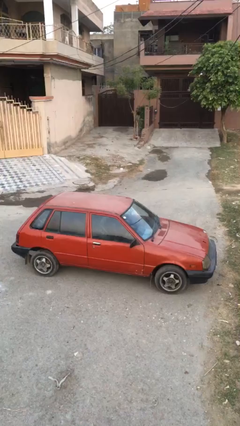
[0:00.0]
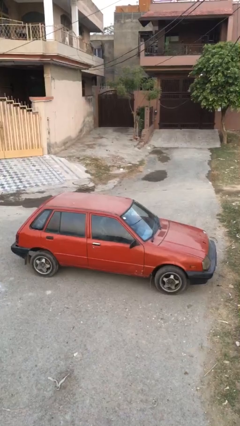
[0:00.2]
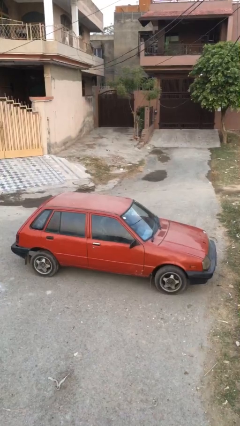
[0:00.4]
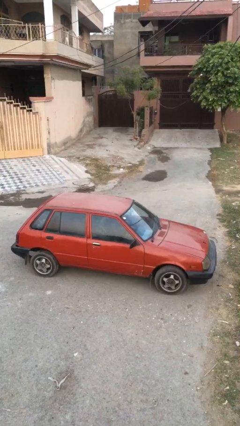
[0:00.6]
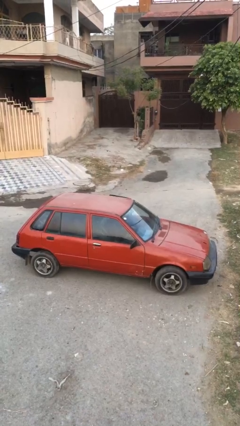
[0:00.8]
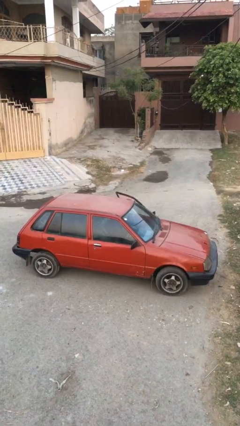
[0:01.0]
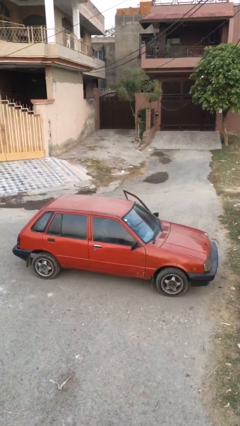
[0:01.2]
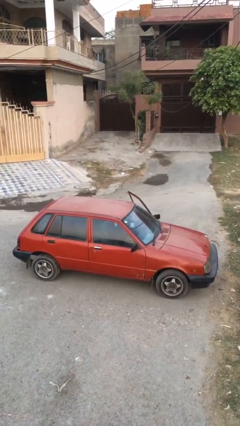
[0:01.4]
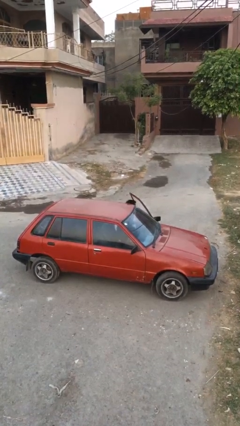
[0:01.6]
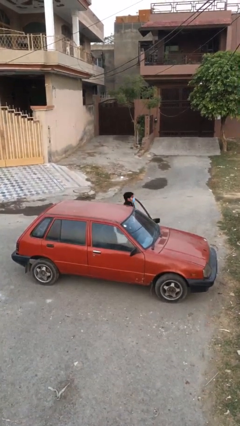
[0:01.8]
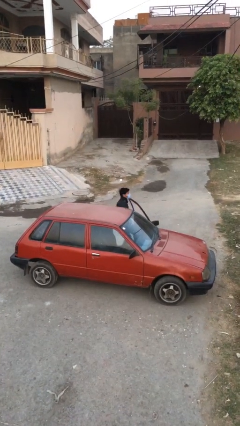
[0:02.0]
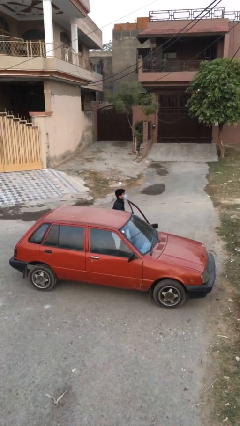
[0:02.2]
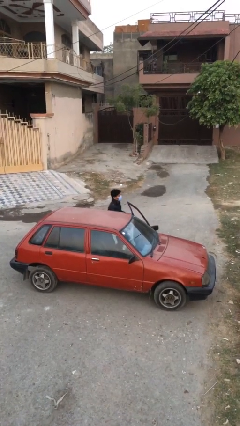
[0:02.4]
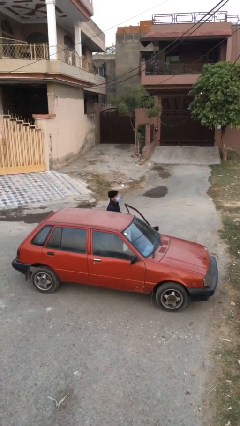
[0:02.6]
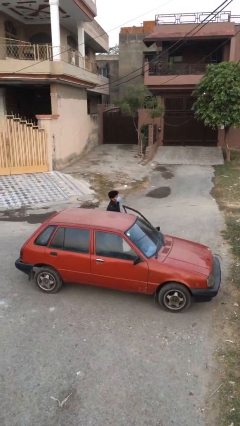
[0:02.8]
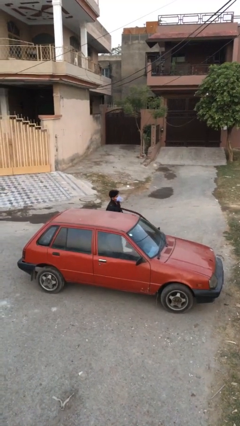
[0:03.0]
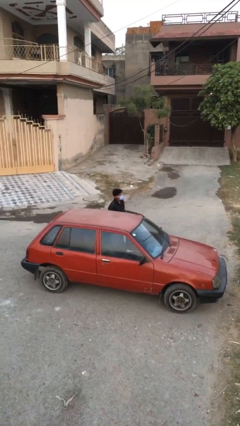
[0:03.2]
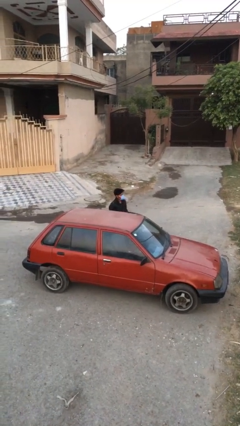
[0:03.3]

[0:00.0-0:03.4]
person exits car

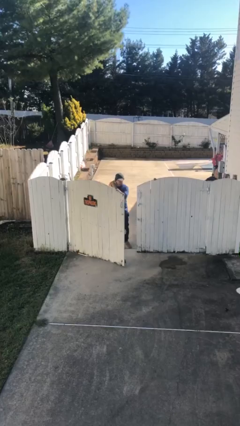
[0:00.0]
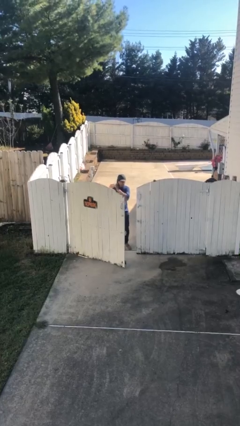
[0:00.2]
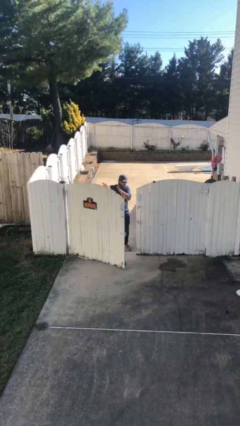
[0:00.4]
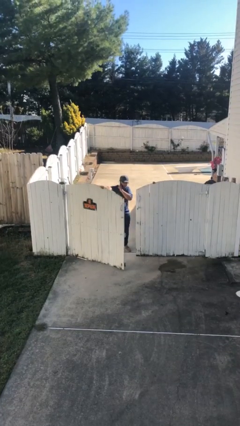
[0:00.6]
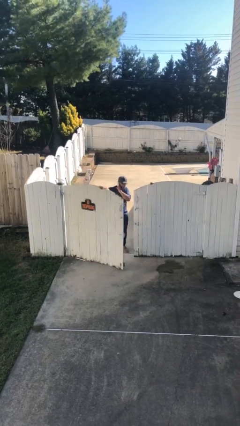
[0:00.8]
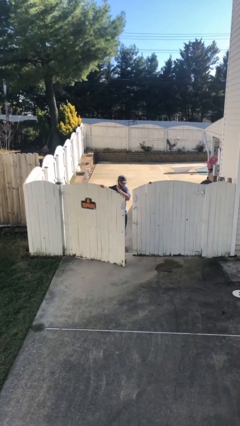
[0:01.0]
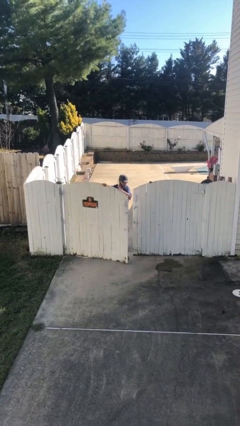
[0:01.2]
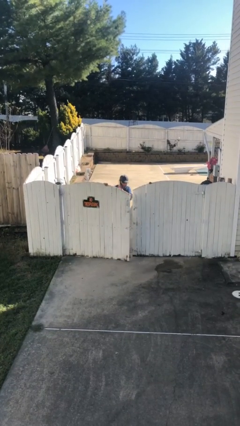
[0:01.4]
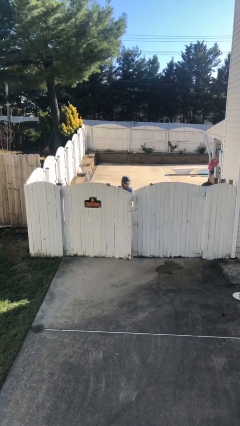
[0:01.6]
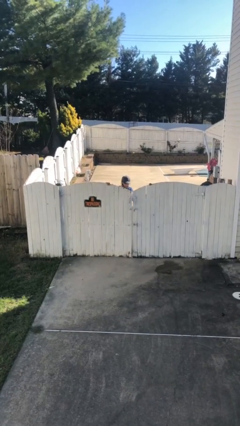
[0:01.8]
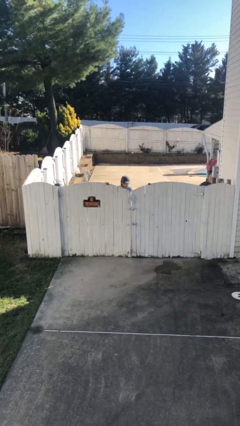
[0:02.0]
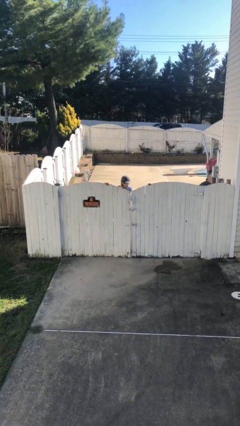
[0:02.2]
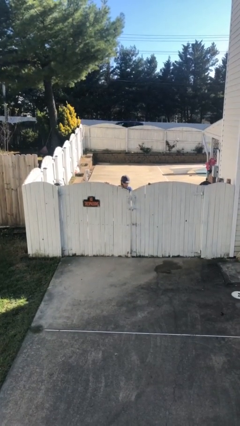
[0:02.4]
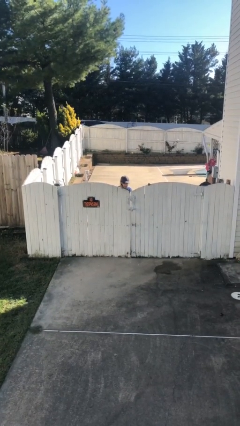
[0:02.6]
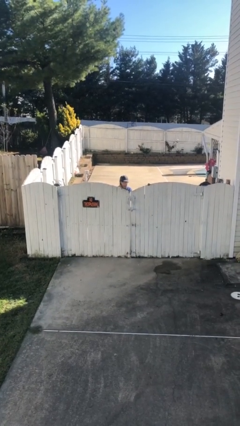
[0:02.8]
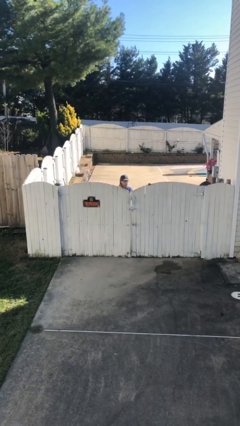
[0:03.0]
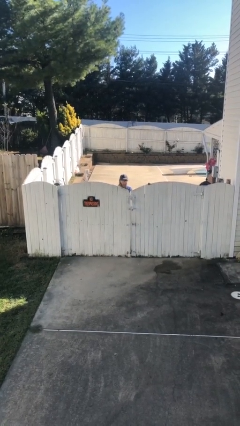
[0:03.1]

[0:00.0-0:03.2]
person closes facility door

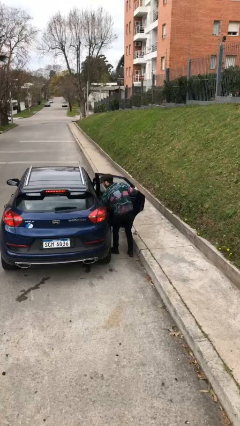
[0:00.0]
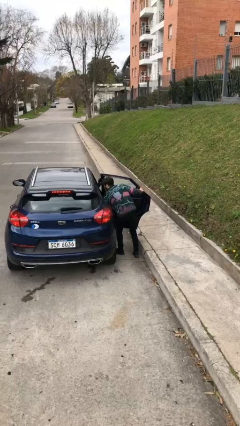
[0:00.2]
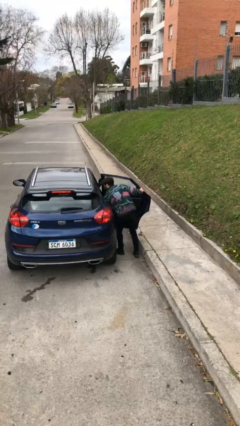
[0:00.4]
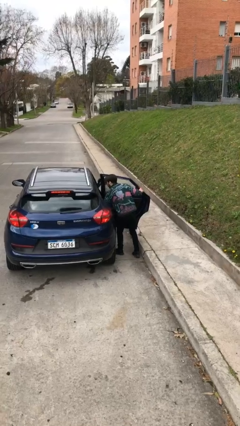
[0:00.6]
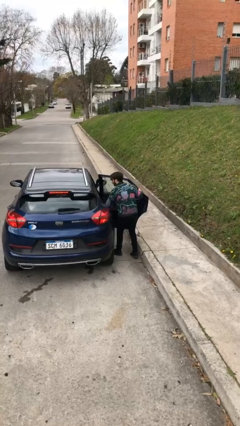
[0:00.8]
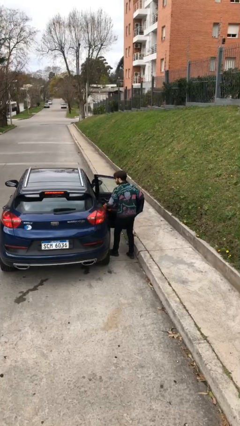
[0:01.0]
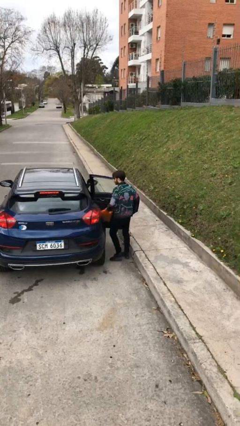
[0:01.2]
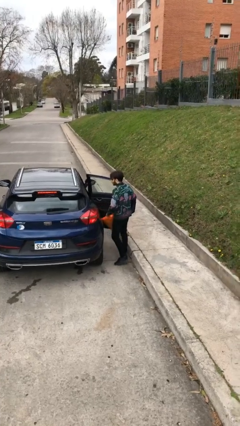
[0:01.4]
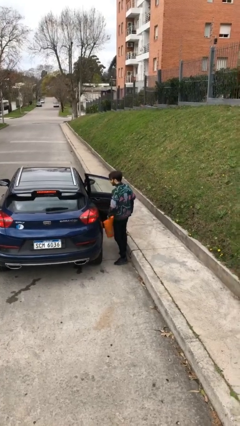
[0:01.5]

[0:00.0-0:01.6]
person unloads car

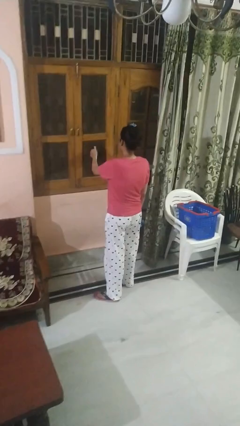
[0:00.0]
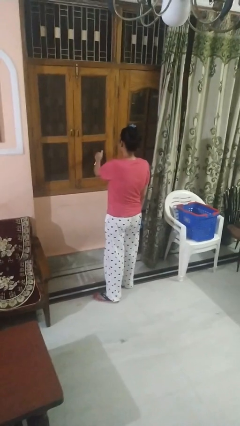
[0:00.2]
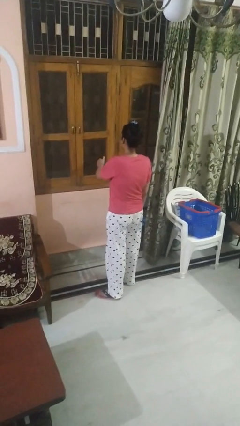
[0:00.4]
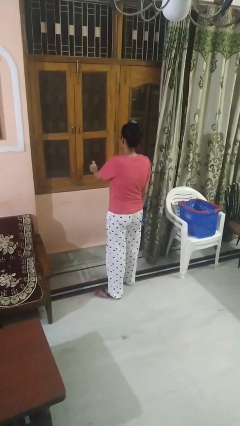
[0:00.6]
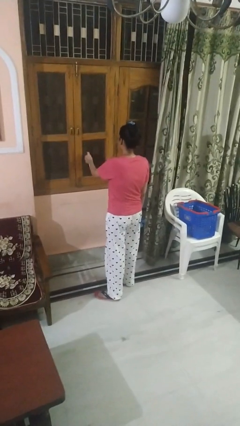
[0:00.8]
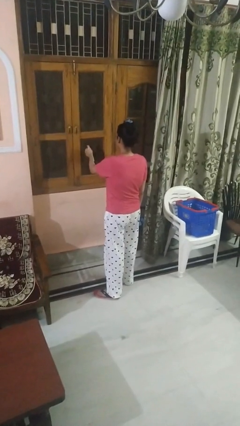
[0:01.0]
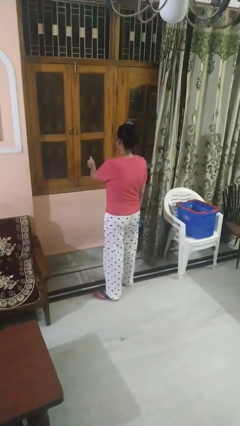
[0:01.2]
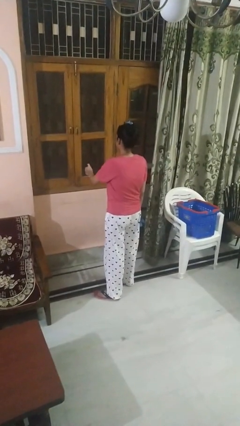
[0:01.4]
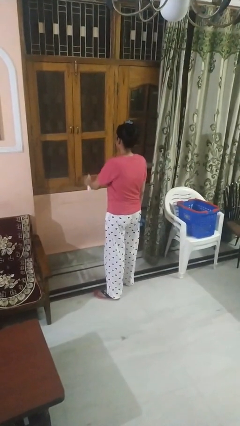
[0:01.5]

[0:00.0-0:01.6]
person sprays from bottle

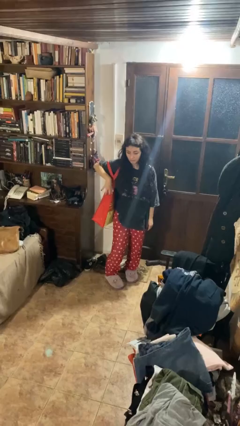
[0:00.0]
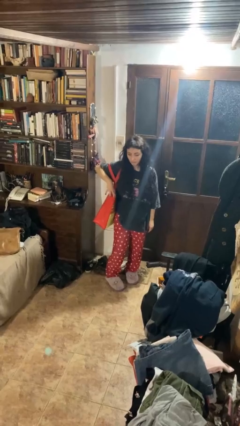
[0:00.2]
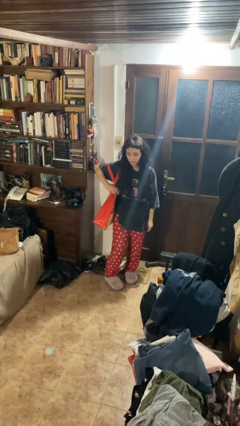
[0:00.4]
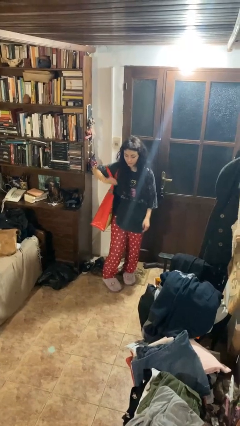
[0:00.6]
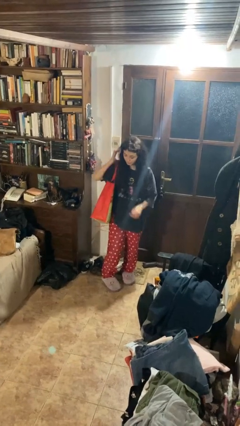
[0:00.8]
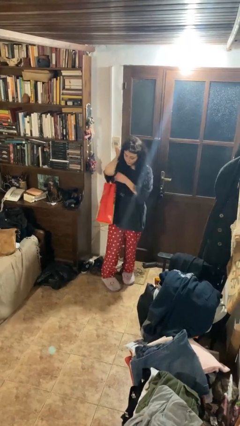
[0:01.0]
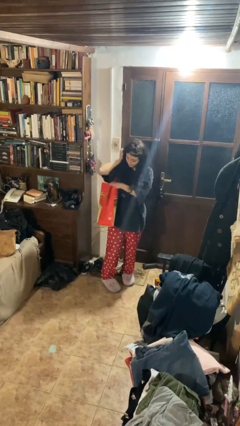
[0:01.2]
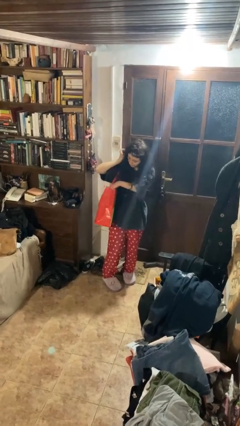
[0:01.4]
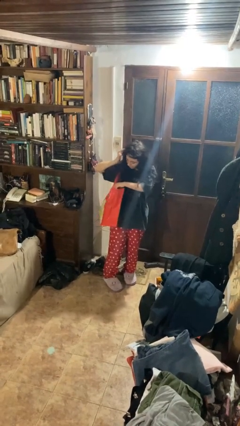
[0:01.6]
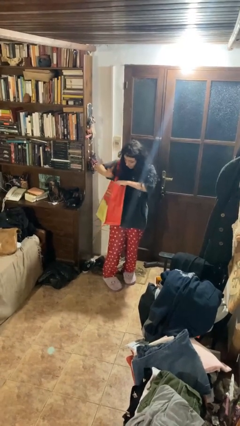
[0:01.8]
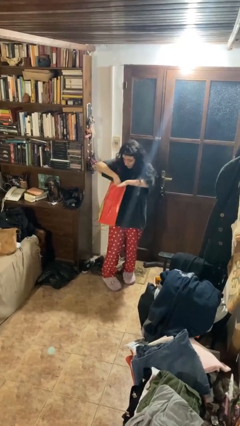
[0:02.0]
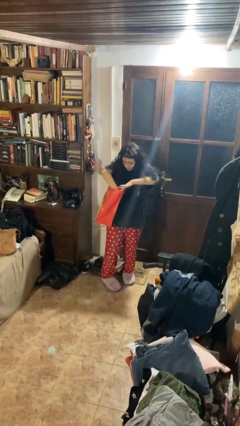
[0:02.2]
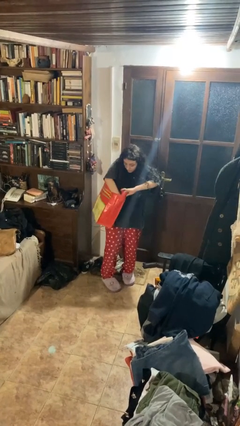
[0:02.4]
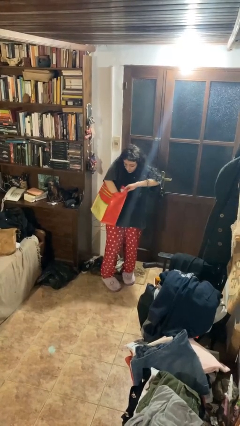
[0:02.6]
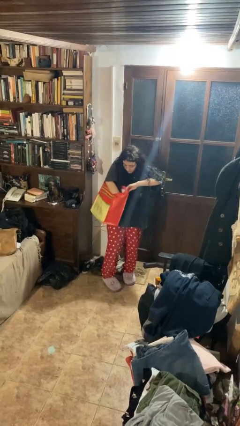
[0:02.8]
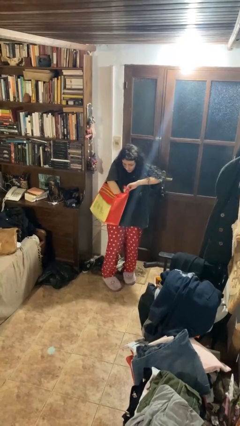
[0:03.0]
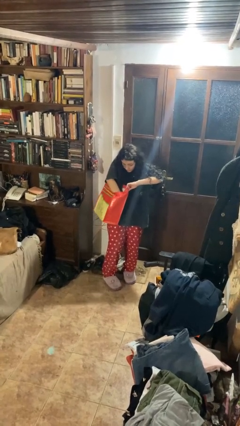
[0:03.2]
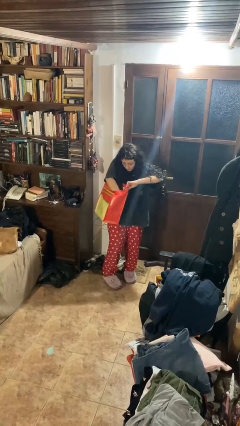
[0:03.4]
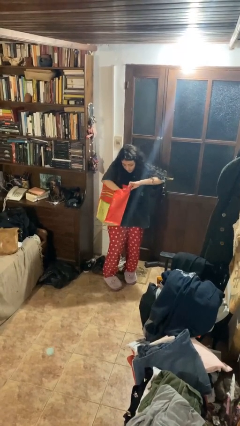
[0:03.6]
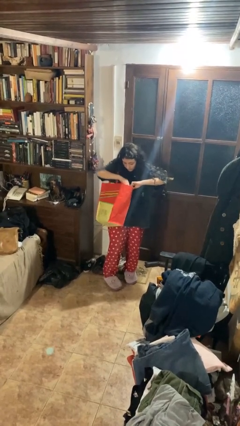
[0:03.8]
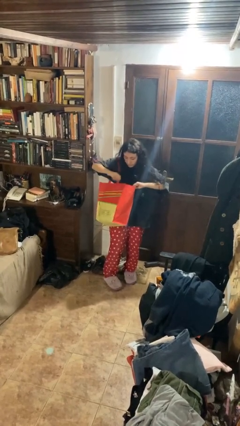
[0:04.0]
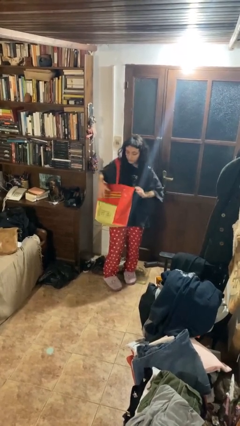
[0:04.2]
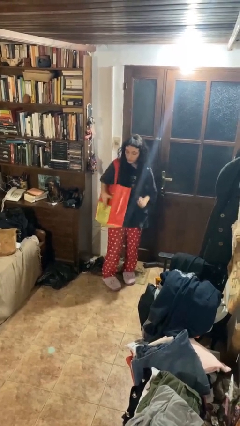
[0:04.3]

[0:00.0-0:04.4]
person searches in bag

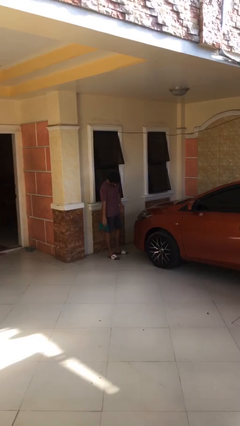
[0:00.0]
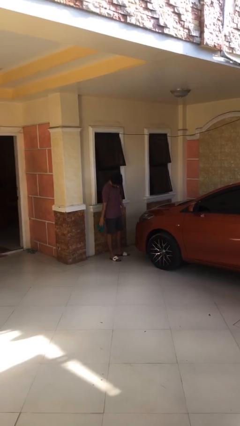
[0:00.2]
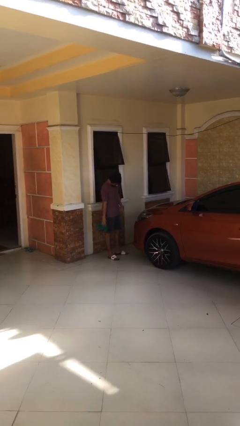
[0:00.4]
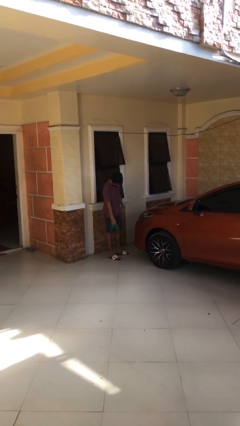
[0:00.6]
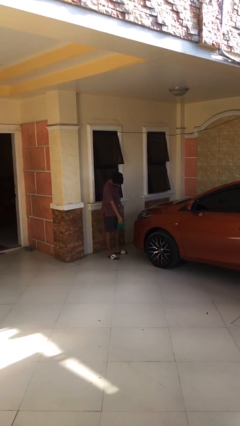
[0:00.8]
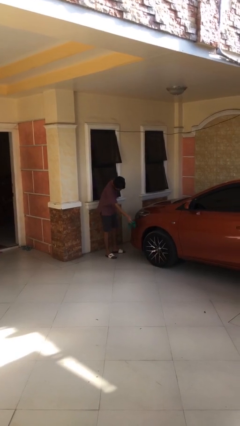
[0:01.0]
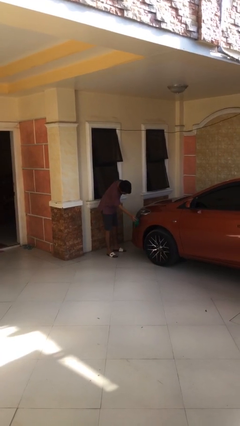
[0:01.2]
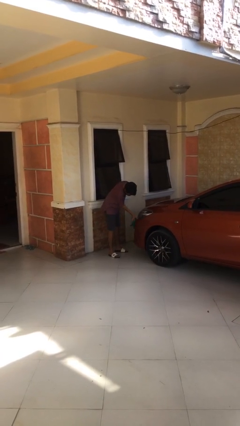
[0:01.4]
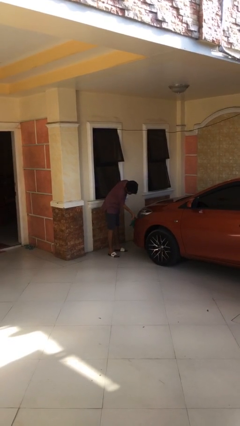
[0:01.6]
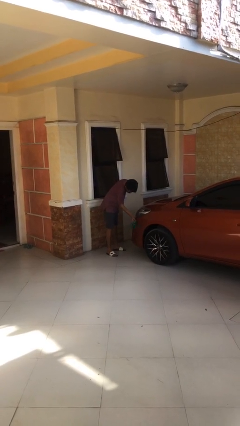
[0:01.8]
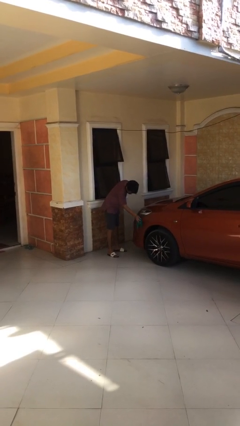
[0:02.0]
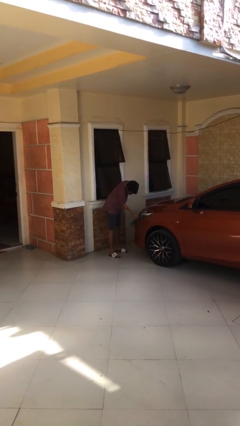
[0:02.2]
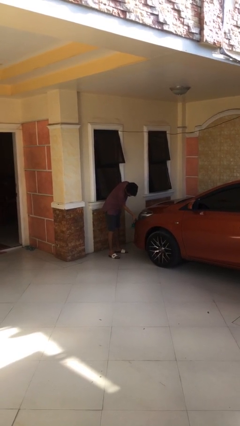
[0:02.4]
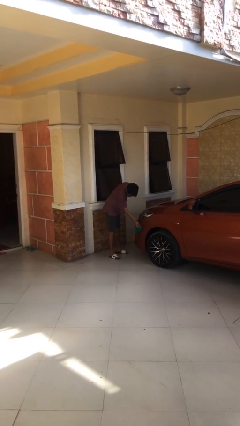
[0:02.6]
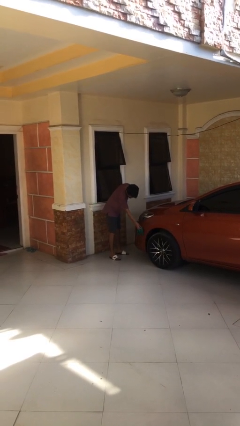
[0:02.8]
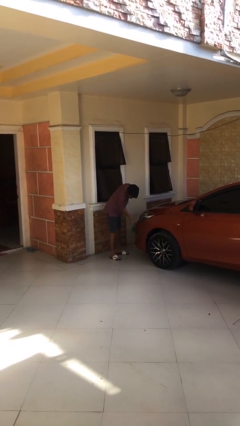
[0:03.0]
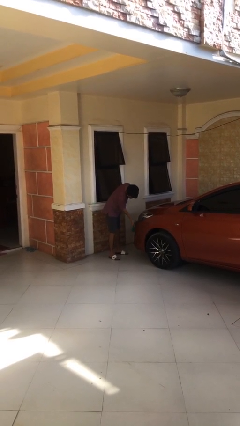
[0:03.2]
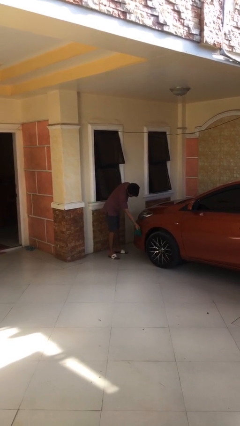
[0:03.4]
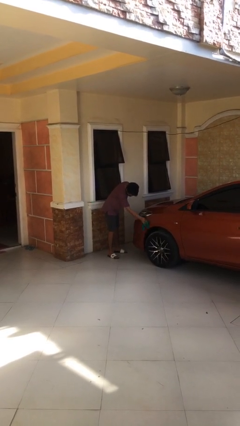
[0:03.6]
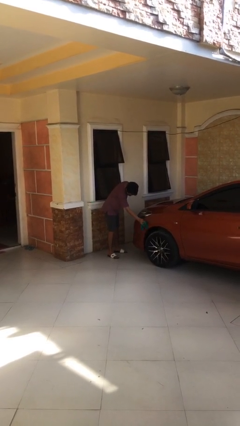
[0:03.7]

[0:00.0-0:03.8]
person polishes car with rag
